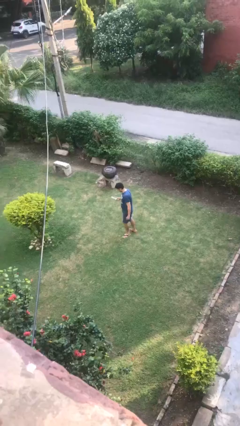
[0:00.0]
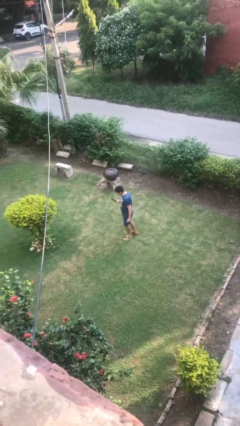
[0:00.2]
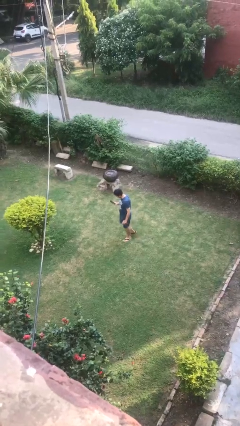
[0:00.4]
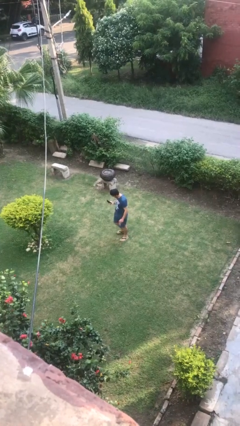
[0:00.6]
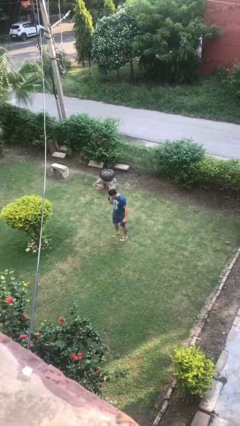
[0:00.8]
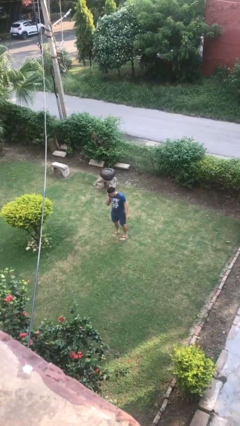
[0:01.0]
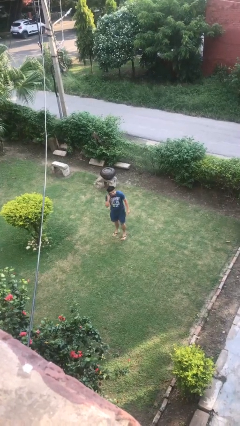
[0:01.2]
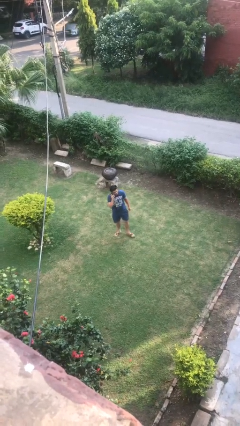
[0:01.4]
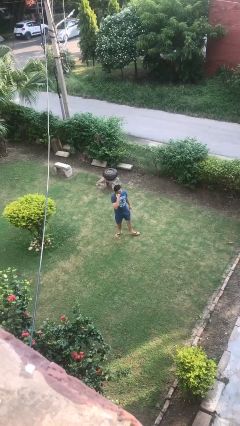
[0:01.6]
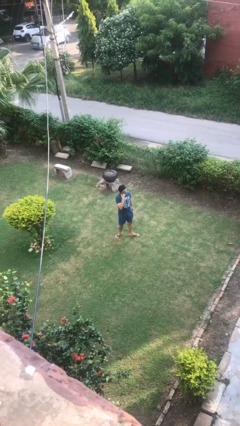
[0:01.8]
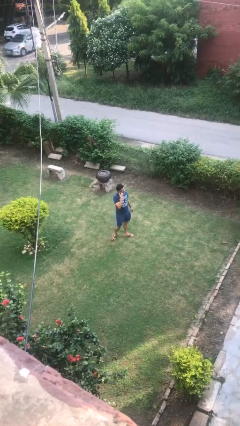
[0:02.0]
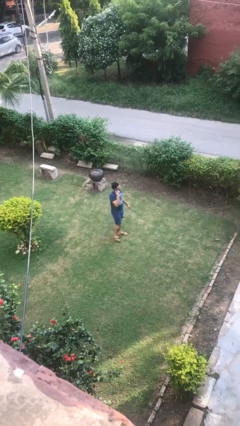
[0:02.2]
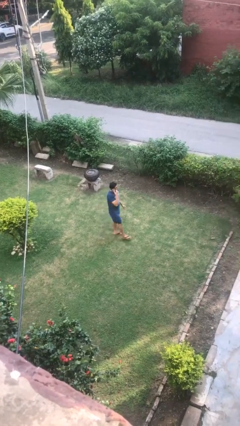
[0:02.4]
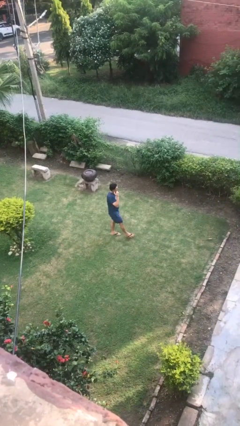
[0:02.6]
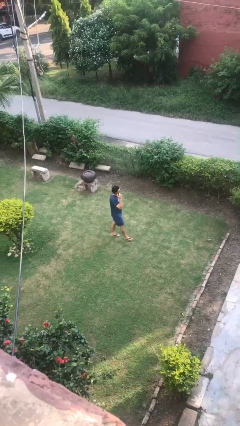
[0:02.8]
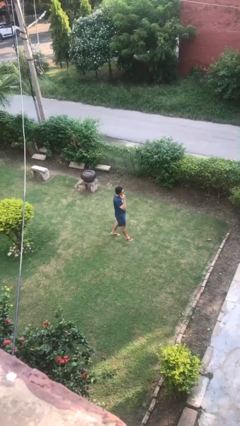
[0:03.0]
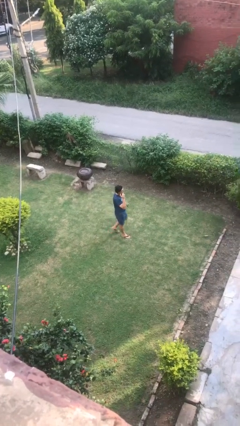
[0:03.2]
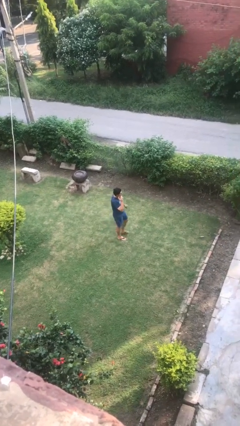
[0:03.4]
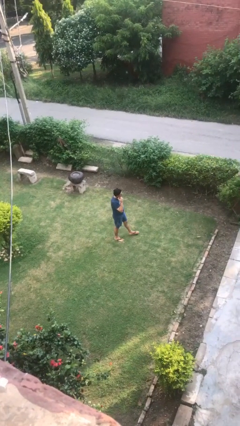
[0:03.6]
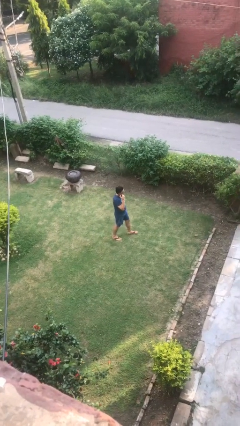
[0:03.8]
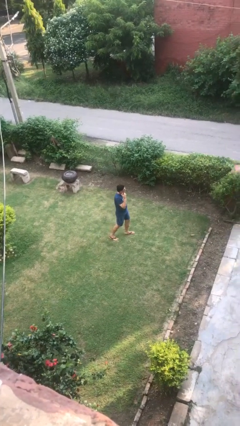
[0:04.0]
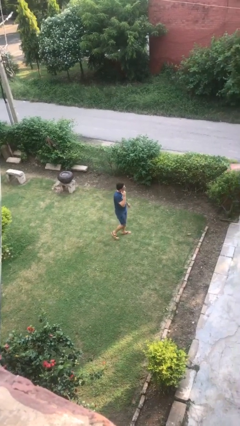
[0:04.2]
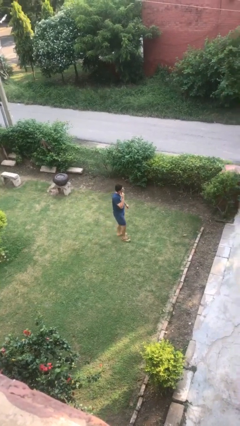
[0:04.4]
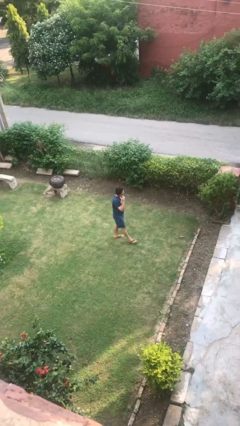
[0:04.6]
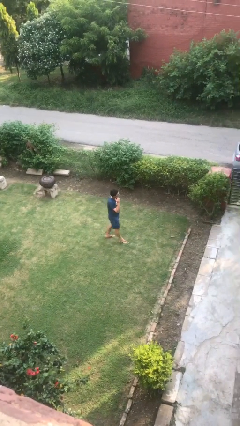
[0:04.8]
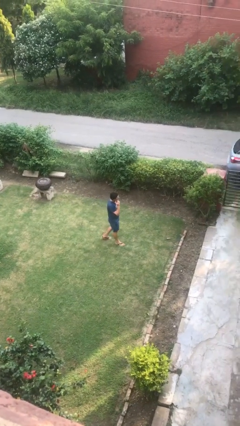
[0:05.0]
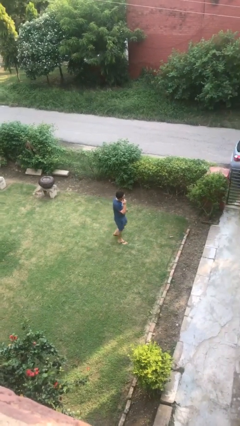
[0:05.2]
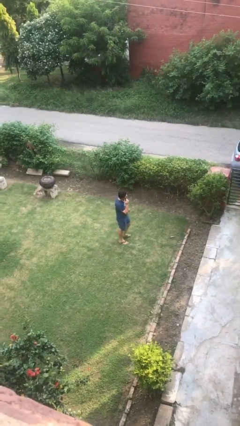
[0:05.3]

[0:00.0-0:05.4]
person talks on phone

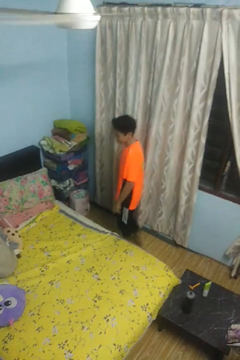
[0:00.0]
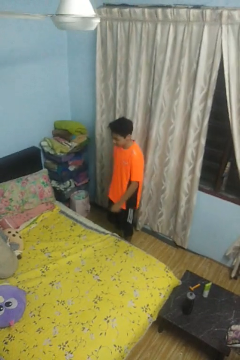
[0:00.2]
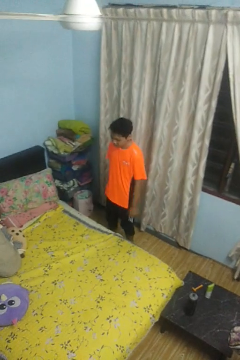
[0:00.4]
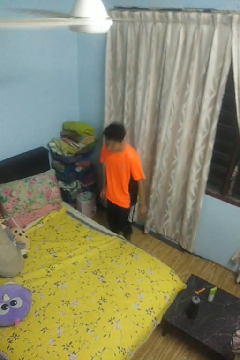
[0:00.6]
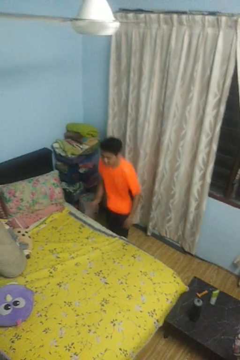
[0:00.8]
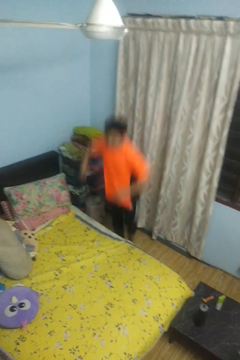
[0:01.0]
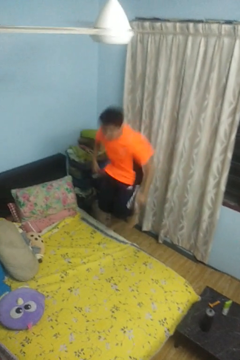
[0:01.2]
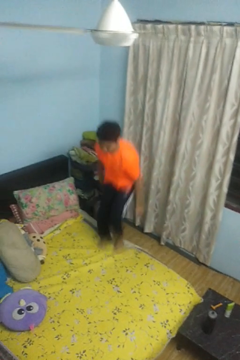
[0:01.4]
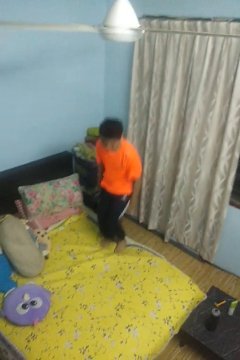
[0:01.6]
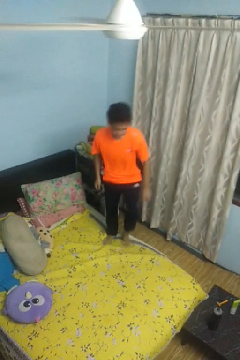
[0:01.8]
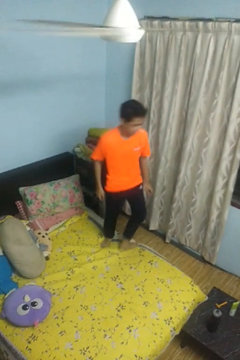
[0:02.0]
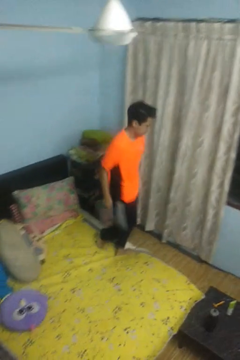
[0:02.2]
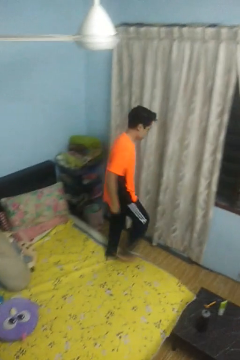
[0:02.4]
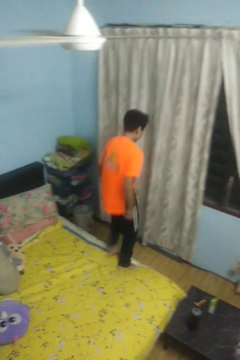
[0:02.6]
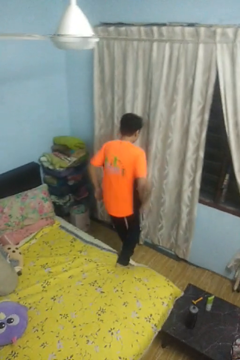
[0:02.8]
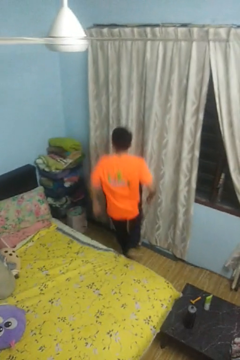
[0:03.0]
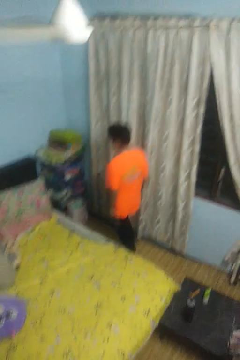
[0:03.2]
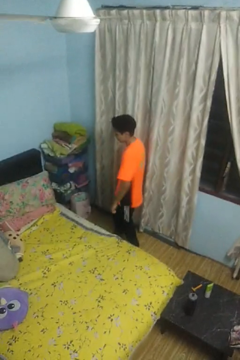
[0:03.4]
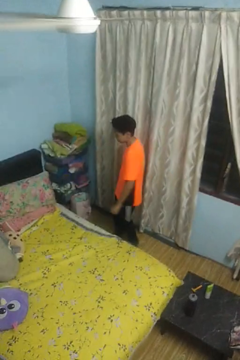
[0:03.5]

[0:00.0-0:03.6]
person jumps on bed

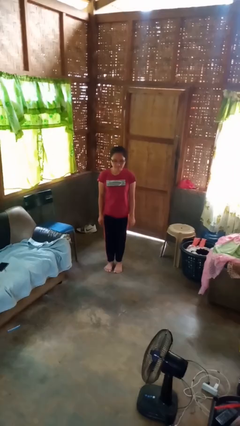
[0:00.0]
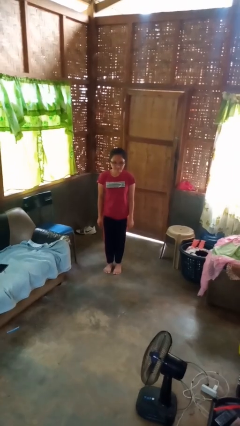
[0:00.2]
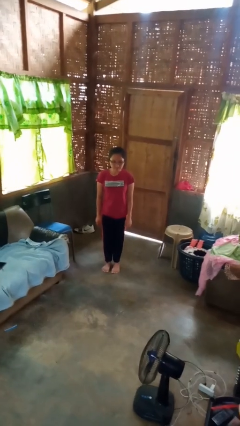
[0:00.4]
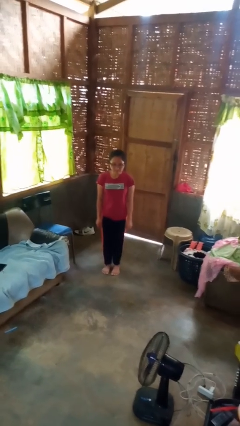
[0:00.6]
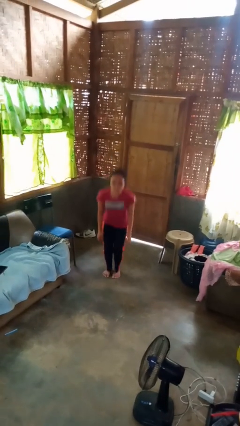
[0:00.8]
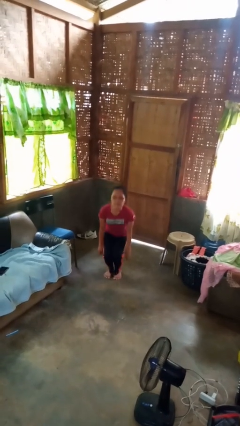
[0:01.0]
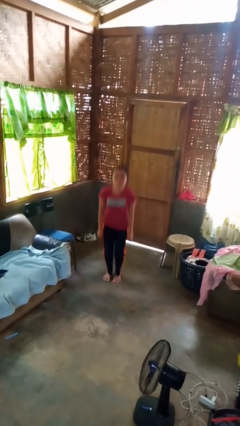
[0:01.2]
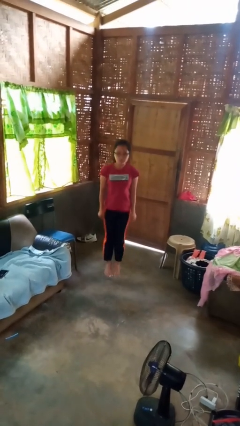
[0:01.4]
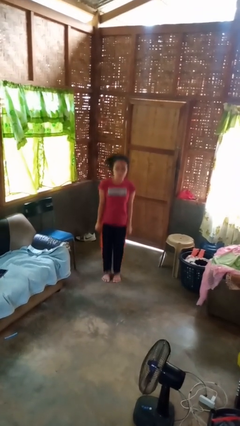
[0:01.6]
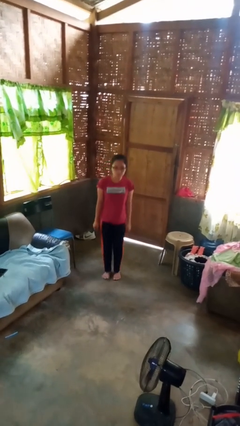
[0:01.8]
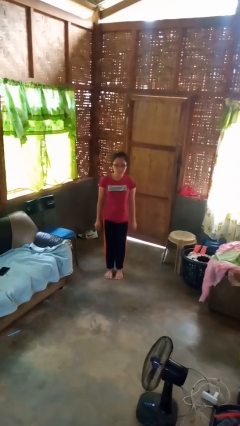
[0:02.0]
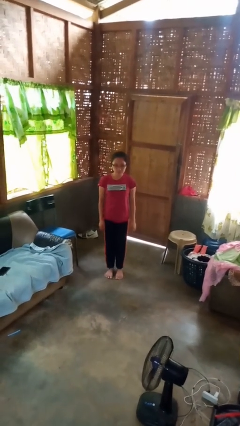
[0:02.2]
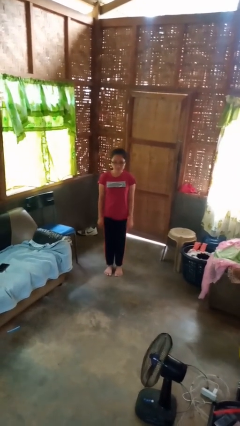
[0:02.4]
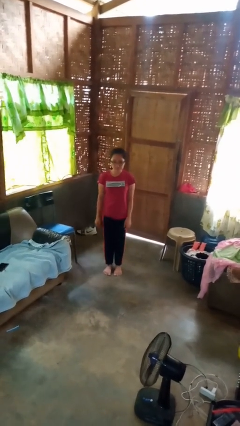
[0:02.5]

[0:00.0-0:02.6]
person jumps

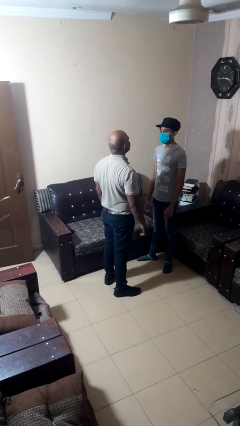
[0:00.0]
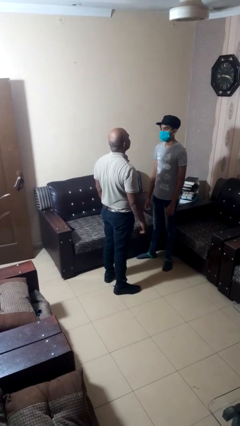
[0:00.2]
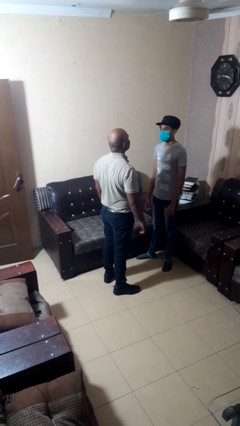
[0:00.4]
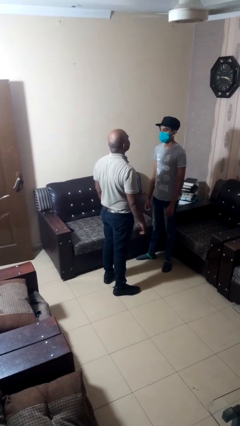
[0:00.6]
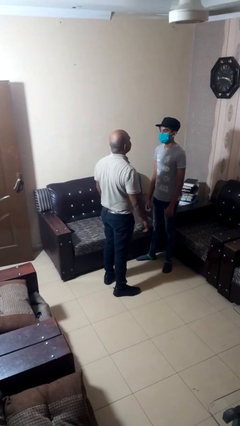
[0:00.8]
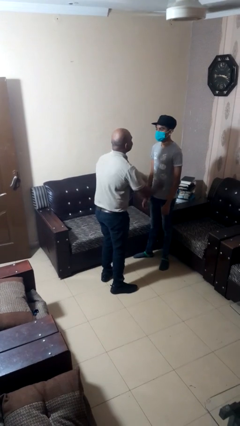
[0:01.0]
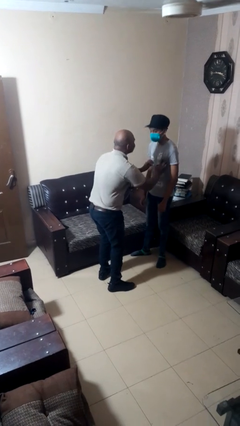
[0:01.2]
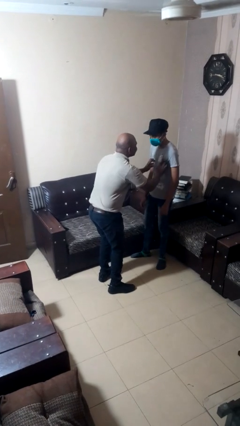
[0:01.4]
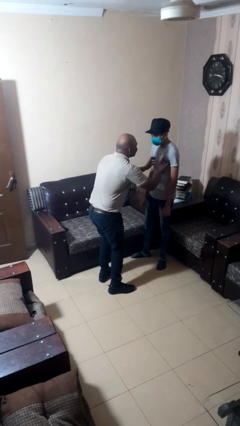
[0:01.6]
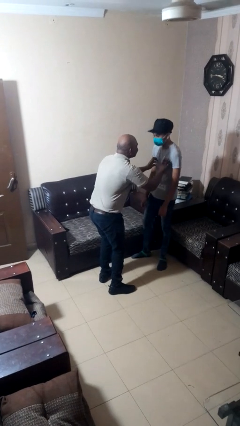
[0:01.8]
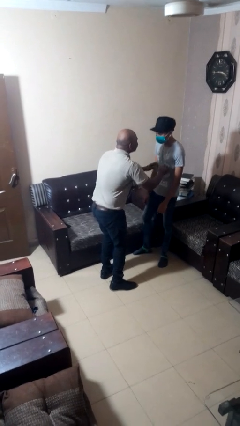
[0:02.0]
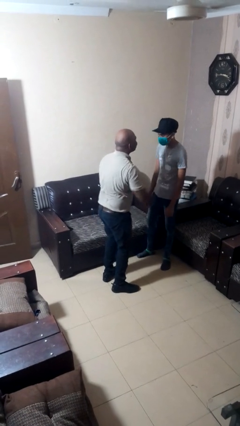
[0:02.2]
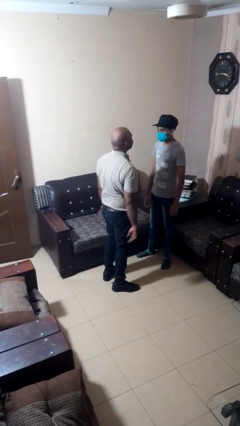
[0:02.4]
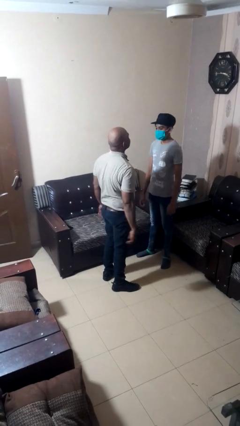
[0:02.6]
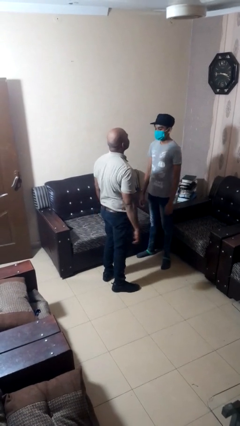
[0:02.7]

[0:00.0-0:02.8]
person tickles person

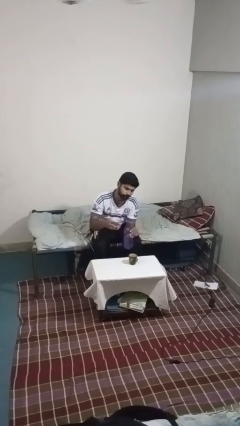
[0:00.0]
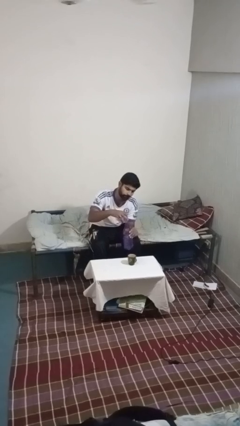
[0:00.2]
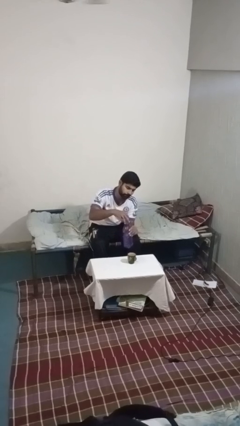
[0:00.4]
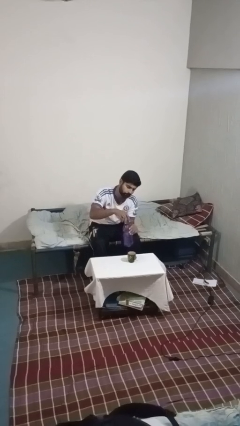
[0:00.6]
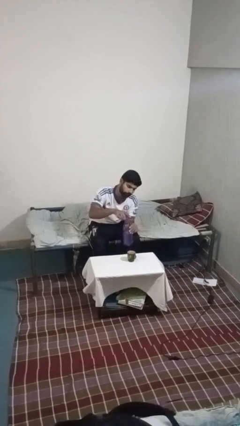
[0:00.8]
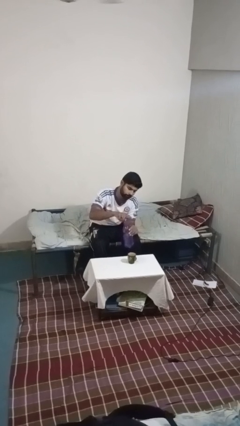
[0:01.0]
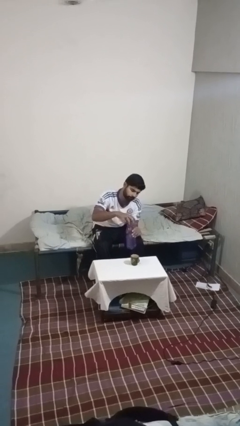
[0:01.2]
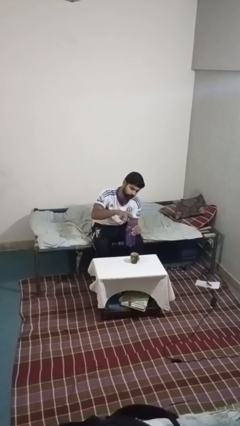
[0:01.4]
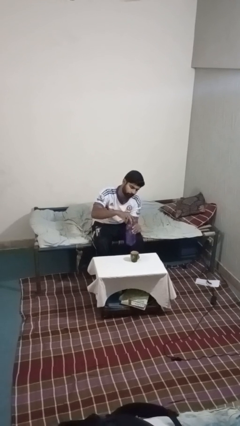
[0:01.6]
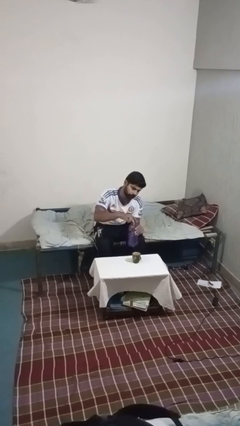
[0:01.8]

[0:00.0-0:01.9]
person screws lid to bottle

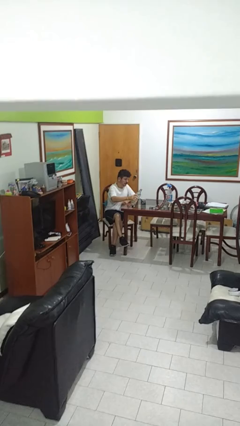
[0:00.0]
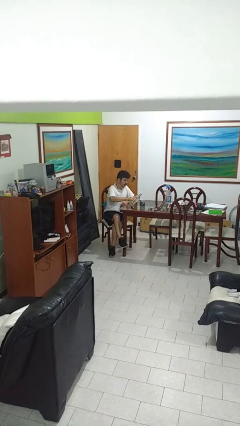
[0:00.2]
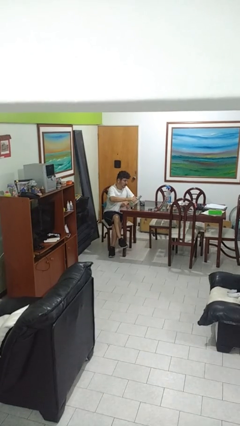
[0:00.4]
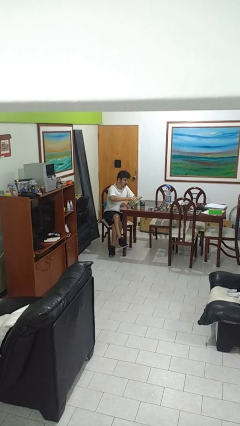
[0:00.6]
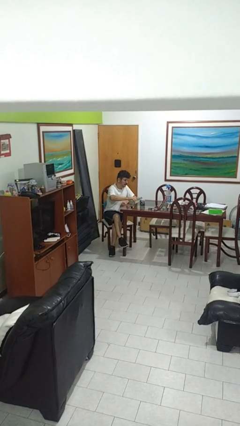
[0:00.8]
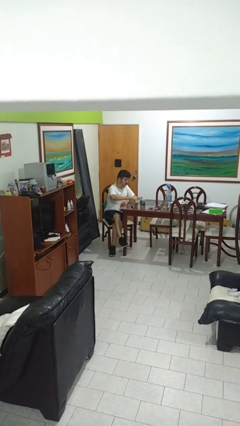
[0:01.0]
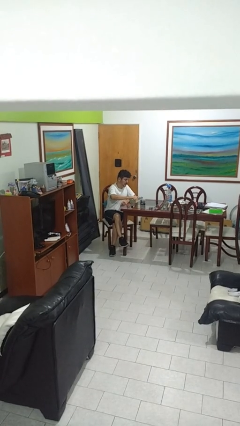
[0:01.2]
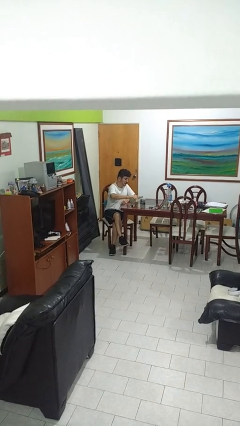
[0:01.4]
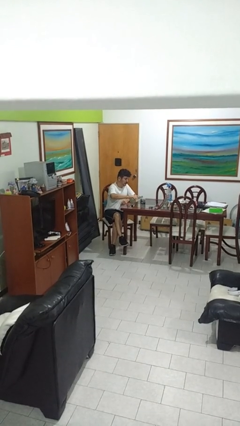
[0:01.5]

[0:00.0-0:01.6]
person pours liquid into cup
